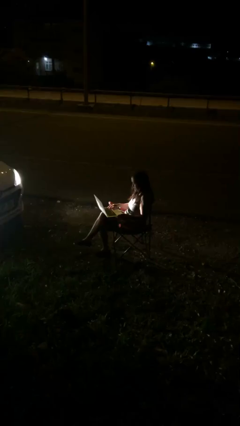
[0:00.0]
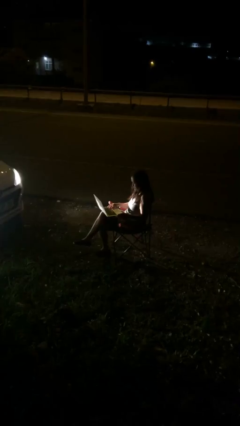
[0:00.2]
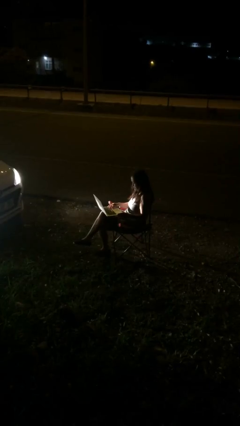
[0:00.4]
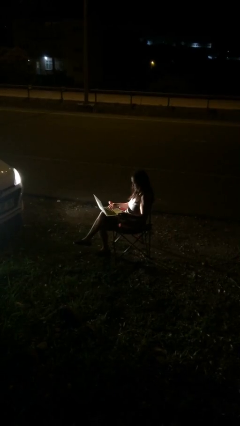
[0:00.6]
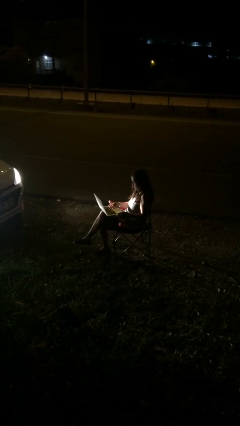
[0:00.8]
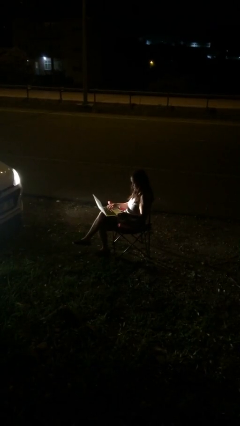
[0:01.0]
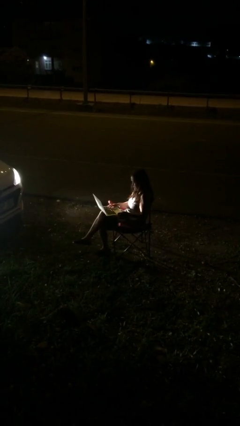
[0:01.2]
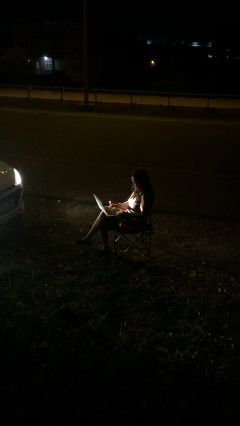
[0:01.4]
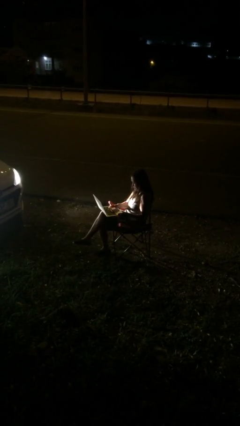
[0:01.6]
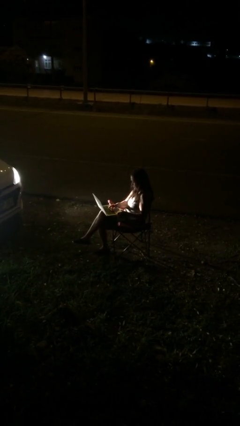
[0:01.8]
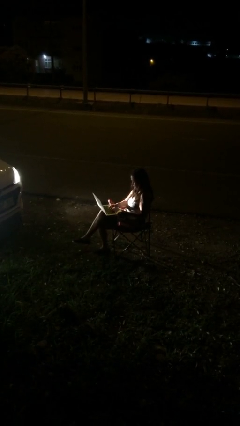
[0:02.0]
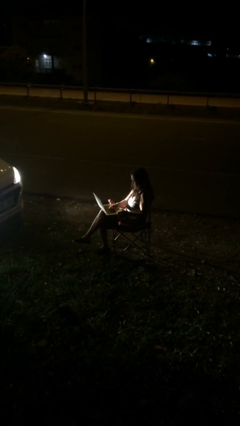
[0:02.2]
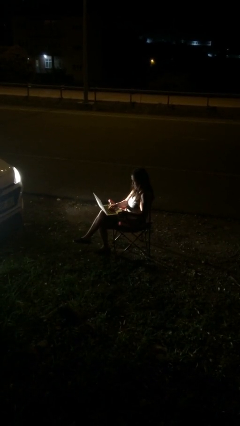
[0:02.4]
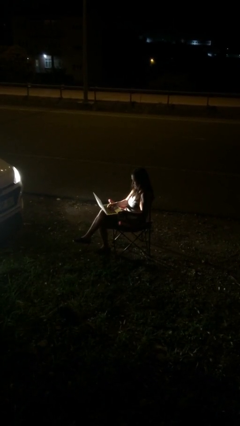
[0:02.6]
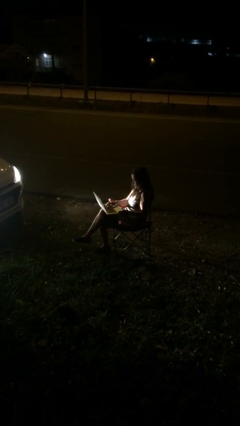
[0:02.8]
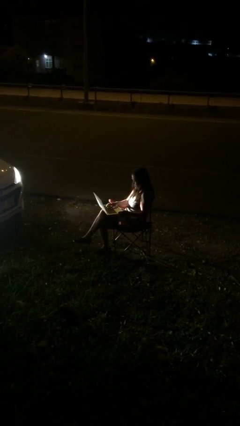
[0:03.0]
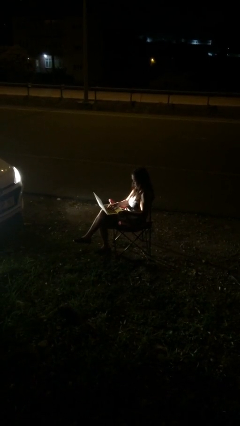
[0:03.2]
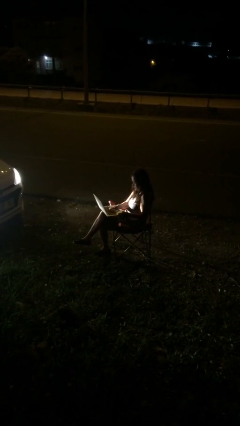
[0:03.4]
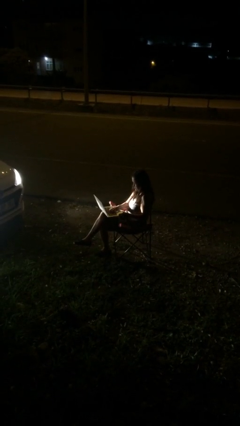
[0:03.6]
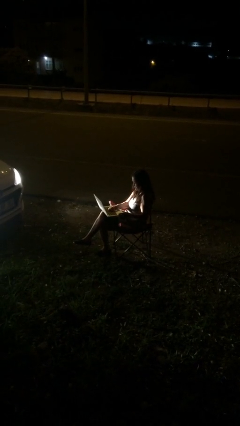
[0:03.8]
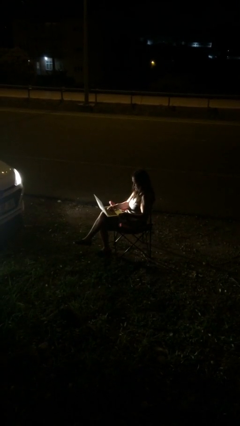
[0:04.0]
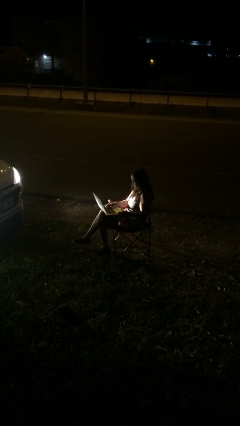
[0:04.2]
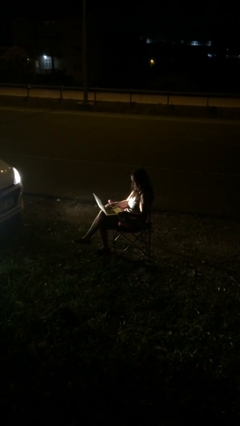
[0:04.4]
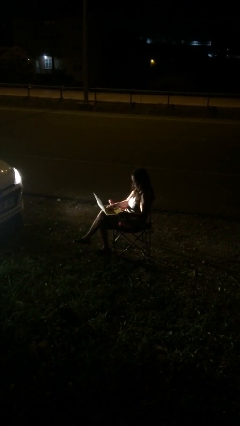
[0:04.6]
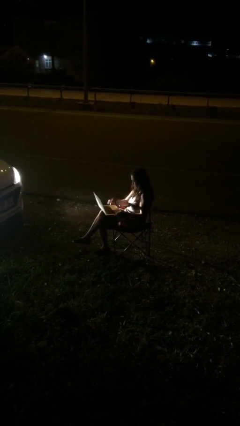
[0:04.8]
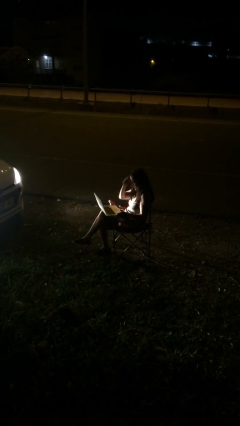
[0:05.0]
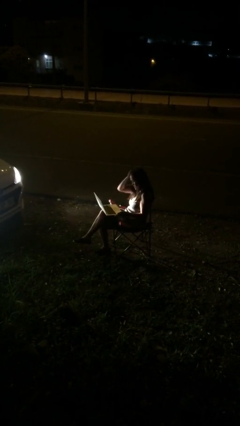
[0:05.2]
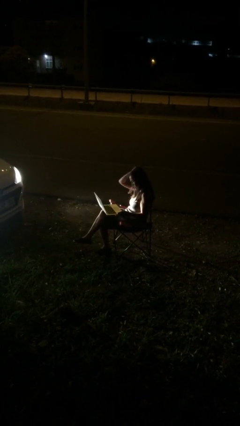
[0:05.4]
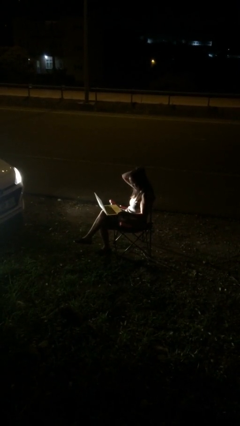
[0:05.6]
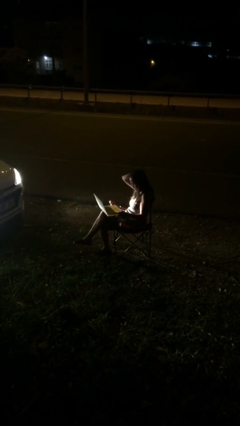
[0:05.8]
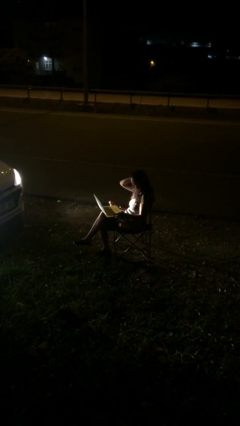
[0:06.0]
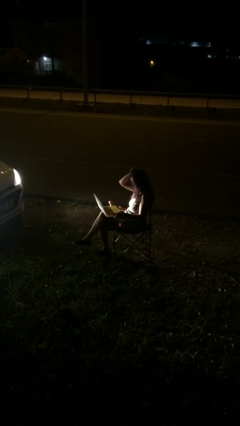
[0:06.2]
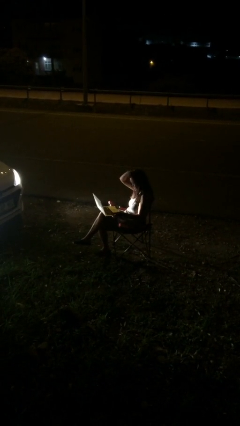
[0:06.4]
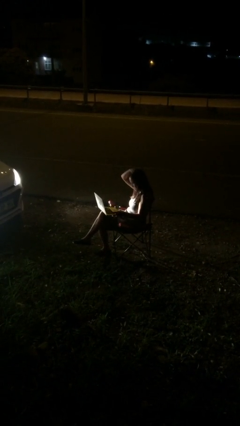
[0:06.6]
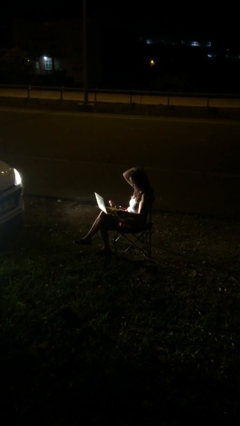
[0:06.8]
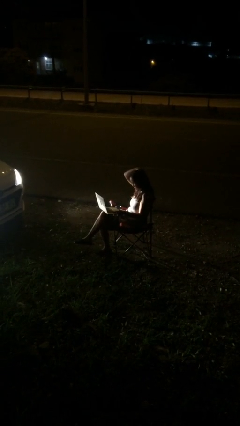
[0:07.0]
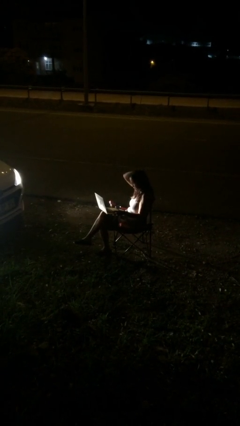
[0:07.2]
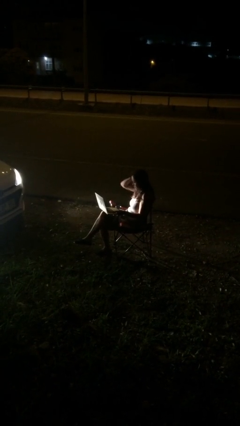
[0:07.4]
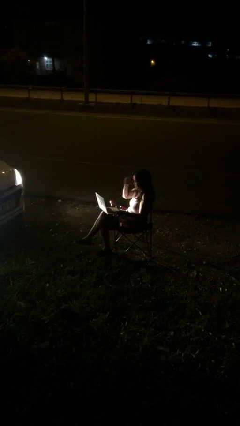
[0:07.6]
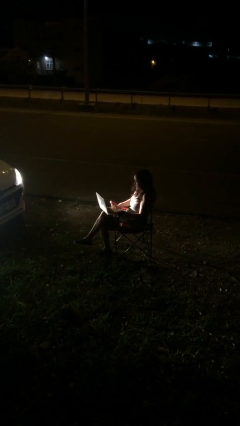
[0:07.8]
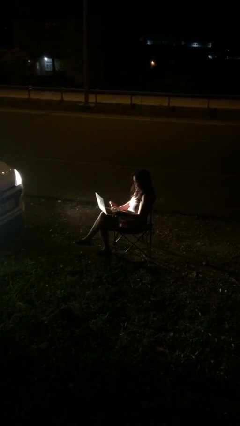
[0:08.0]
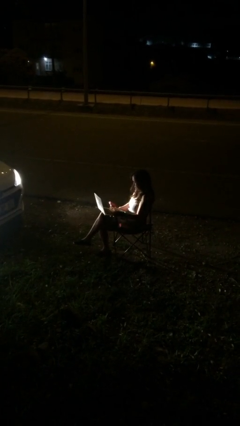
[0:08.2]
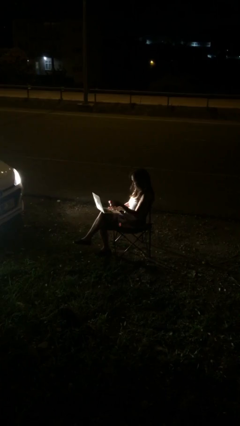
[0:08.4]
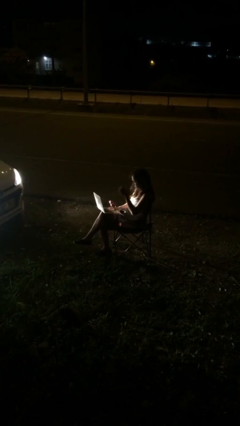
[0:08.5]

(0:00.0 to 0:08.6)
person interacts with laptop

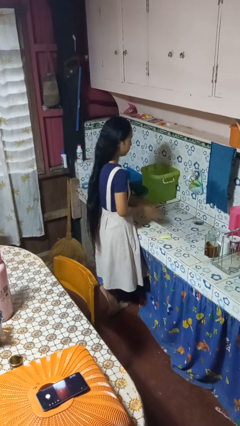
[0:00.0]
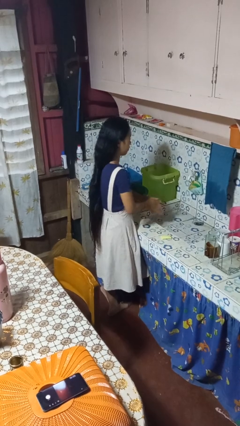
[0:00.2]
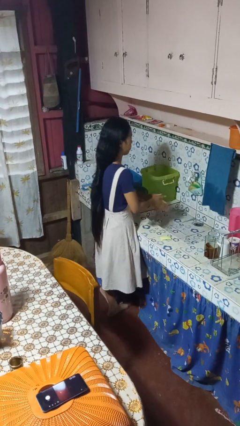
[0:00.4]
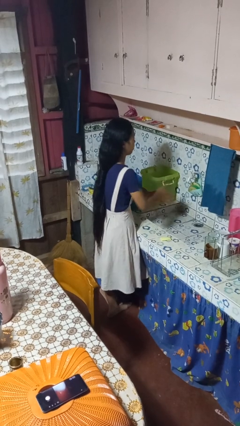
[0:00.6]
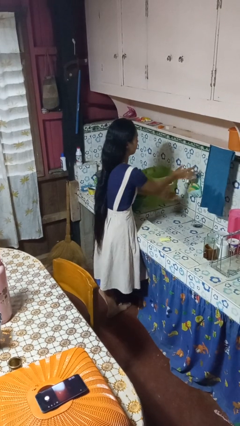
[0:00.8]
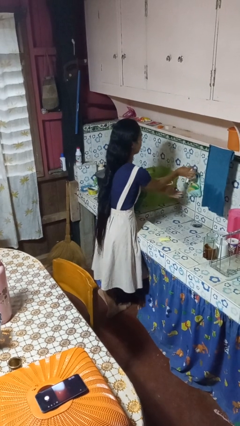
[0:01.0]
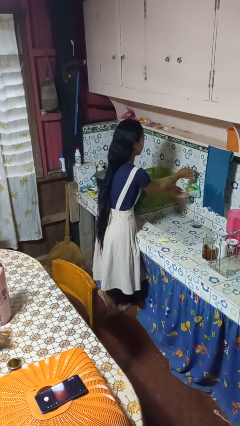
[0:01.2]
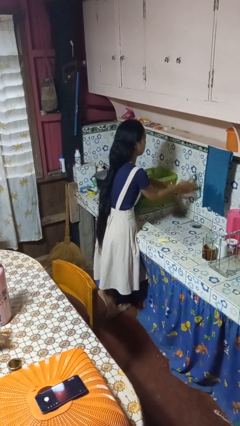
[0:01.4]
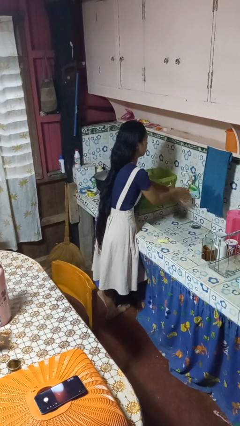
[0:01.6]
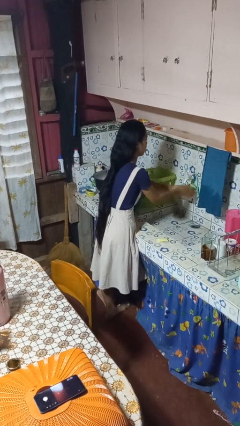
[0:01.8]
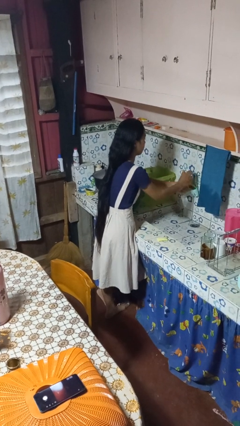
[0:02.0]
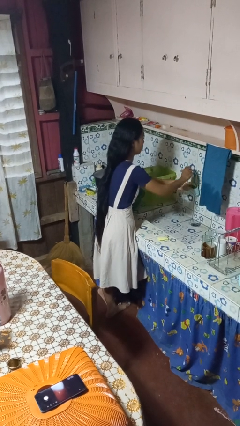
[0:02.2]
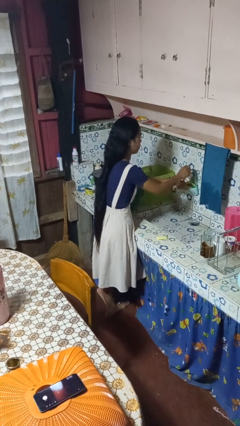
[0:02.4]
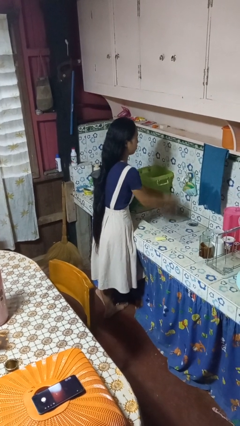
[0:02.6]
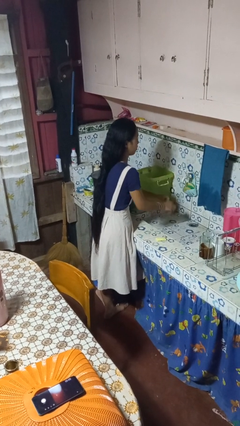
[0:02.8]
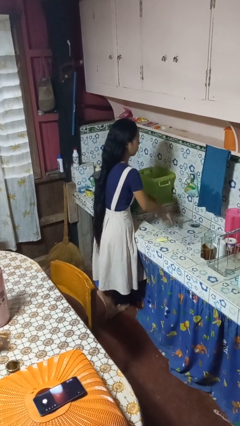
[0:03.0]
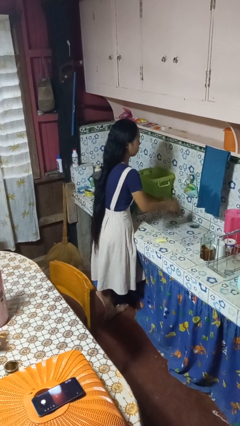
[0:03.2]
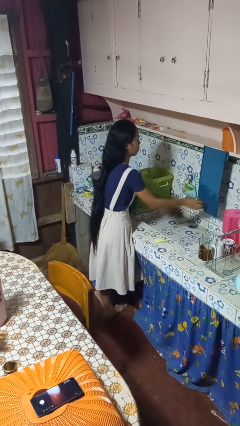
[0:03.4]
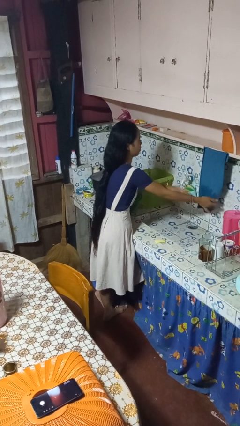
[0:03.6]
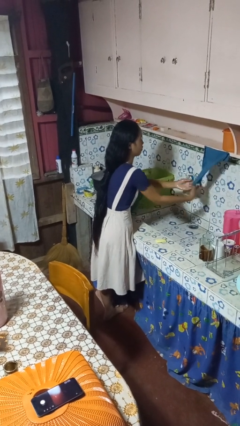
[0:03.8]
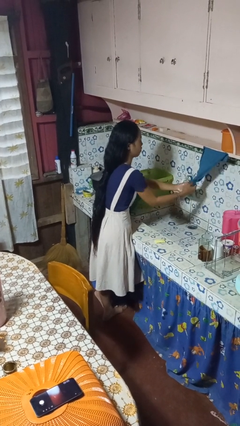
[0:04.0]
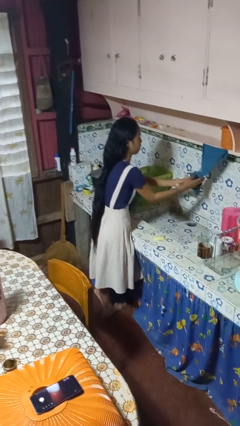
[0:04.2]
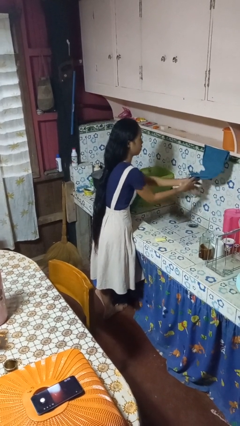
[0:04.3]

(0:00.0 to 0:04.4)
person washes hands

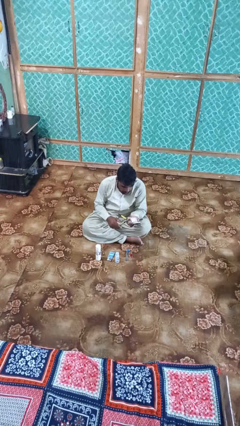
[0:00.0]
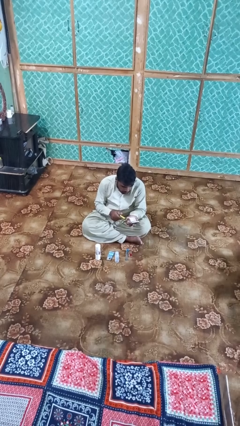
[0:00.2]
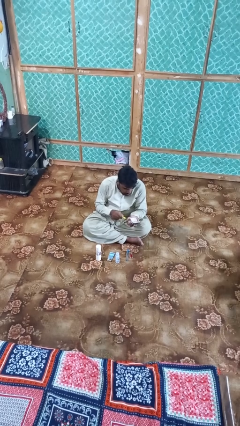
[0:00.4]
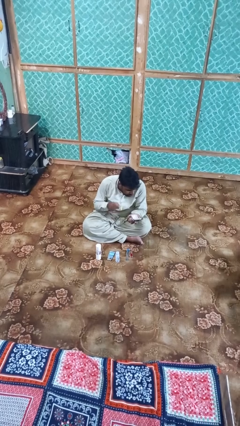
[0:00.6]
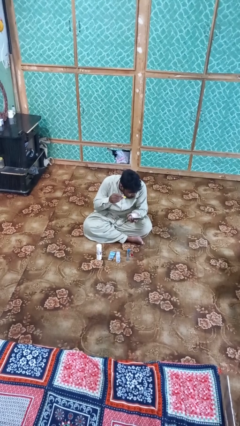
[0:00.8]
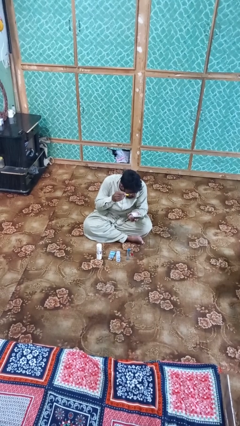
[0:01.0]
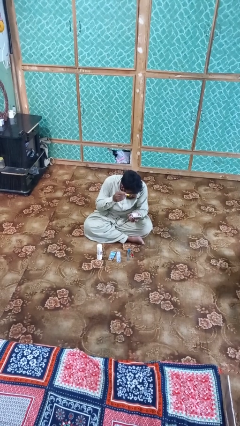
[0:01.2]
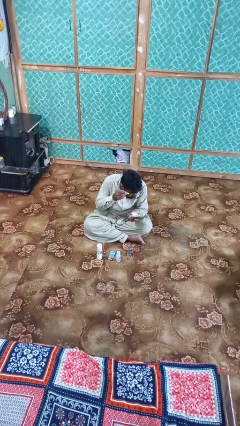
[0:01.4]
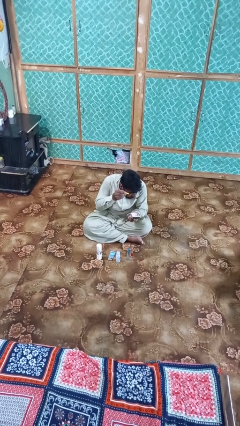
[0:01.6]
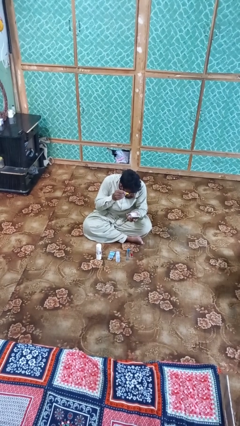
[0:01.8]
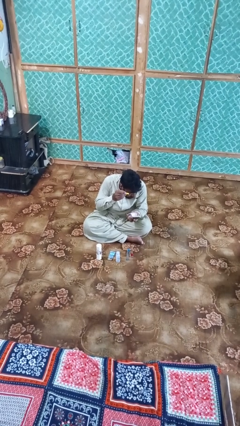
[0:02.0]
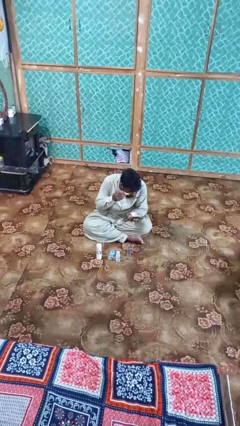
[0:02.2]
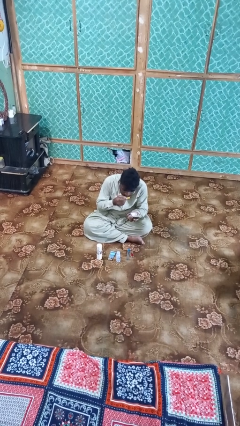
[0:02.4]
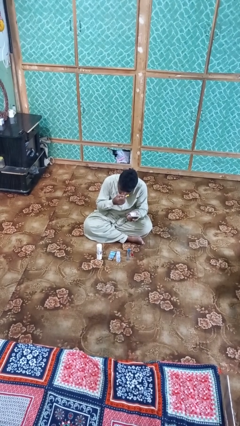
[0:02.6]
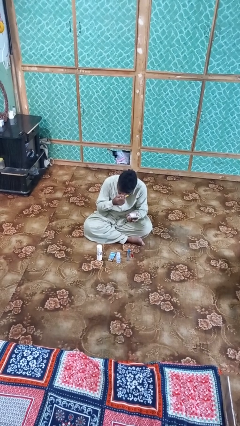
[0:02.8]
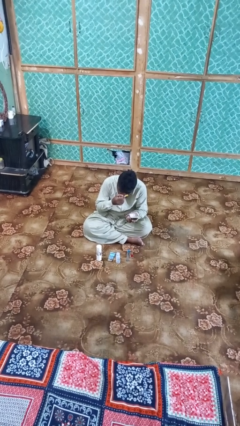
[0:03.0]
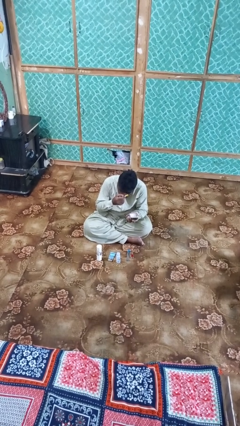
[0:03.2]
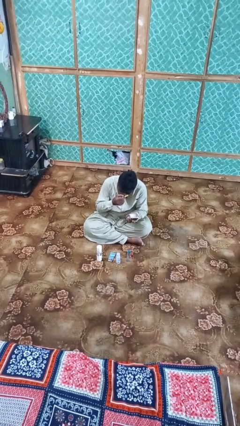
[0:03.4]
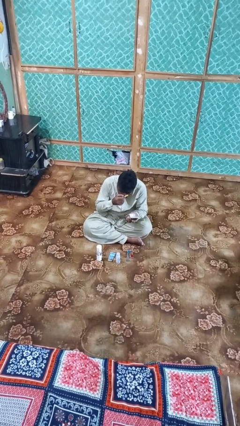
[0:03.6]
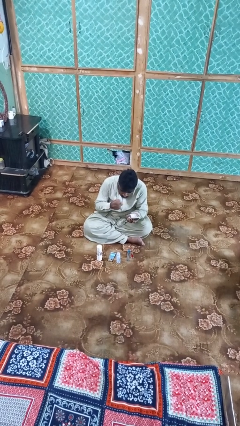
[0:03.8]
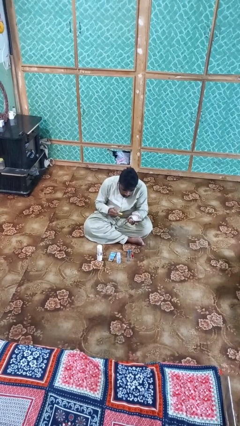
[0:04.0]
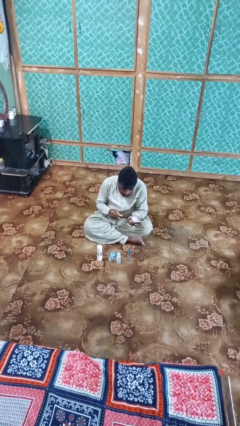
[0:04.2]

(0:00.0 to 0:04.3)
person applies eye makeup

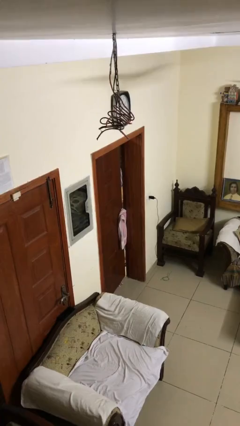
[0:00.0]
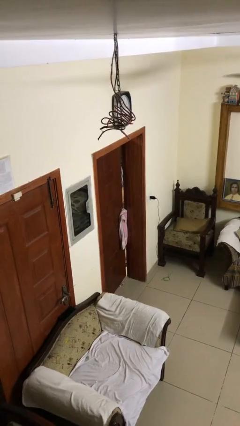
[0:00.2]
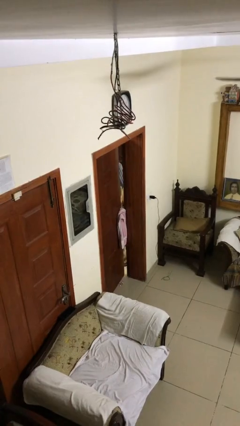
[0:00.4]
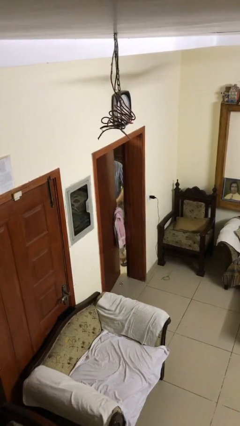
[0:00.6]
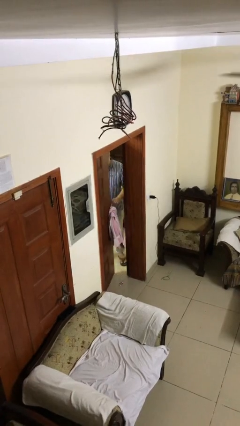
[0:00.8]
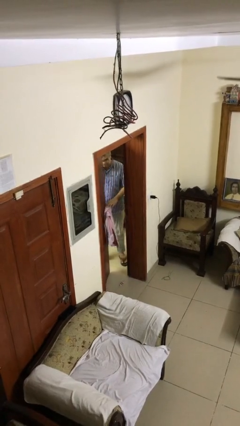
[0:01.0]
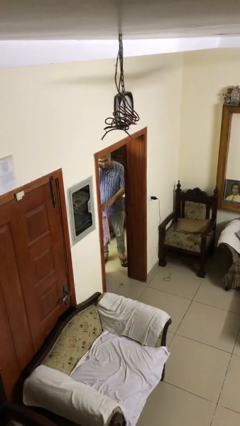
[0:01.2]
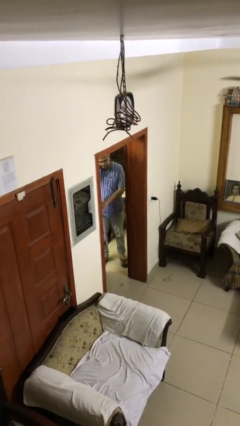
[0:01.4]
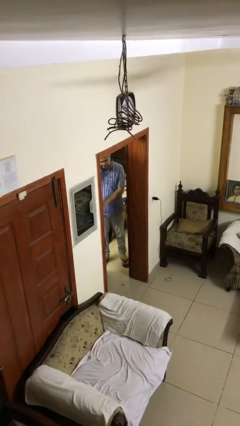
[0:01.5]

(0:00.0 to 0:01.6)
person opens facility door
